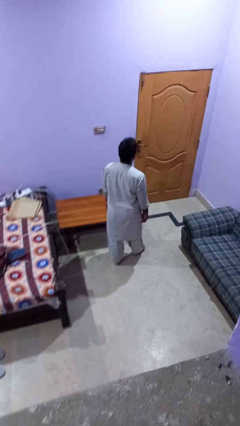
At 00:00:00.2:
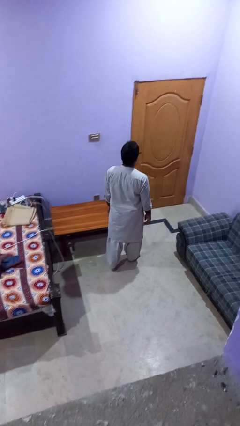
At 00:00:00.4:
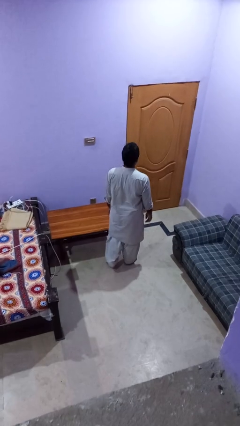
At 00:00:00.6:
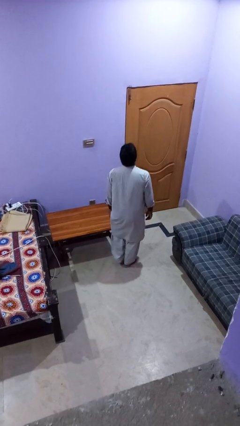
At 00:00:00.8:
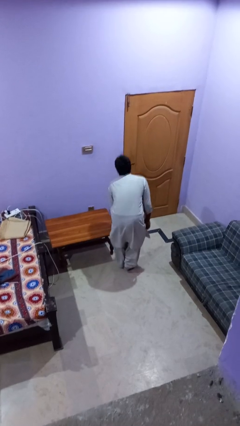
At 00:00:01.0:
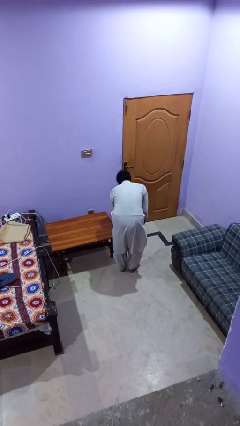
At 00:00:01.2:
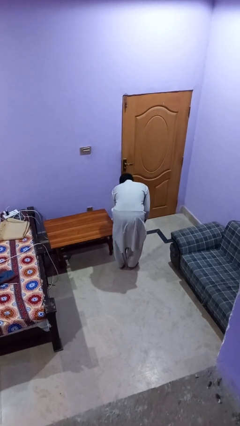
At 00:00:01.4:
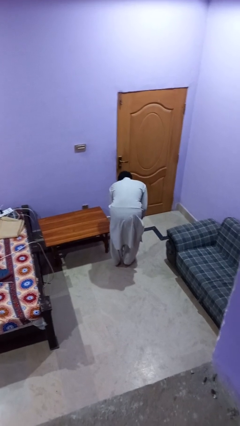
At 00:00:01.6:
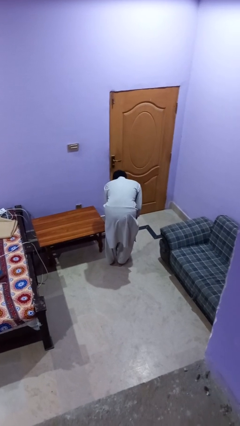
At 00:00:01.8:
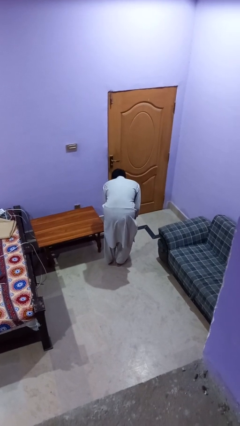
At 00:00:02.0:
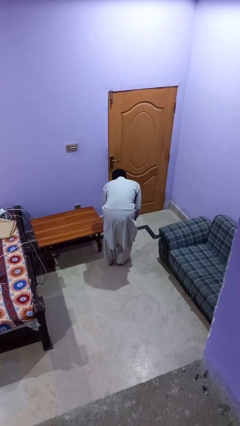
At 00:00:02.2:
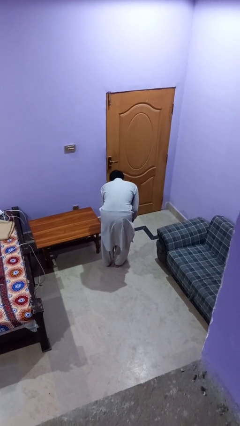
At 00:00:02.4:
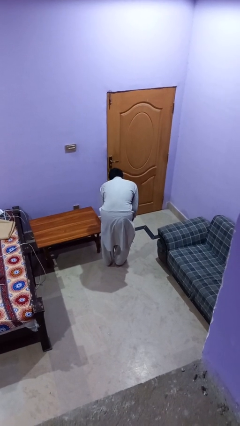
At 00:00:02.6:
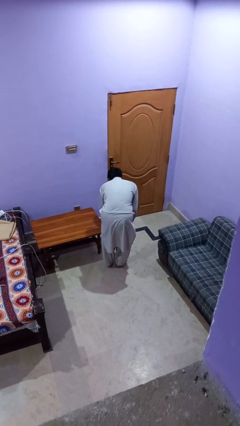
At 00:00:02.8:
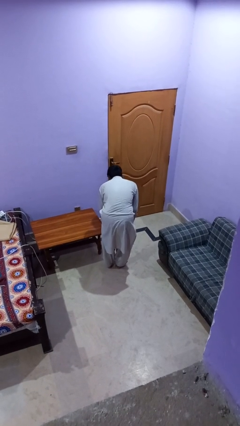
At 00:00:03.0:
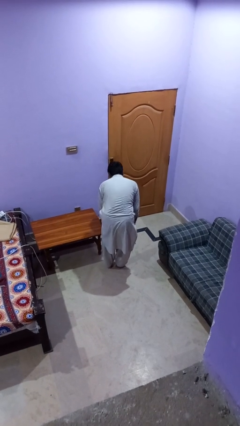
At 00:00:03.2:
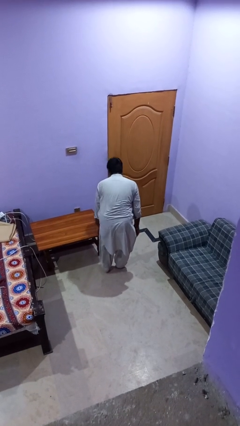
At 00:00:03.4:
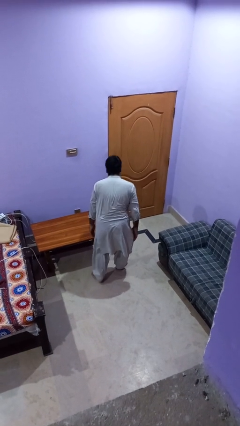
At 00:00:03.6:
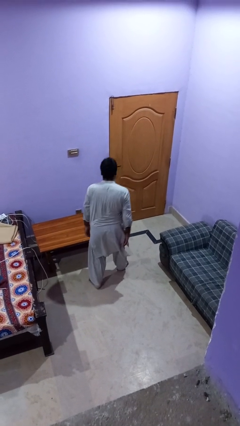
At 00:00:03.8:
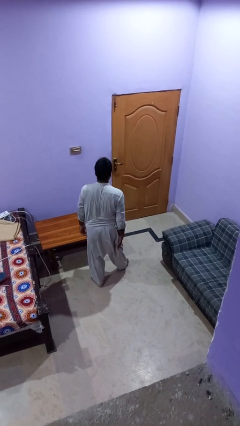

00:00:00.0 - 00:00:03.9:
person bumps into table

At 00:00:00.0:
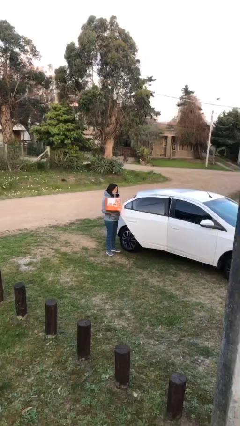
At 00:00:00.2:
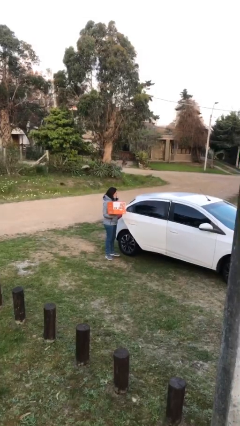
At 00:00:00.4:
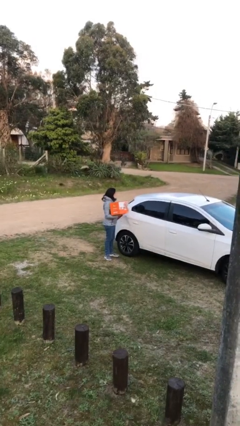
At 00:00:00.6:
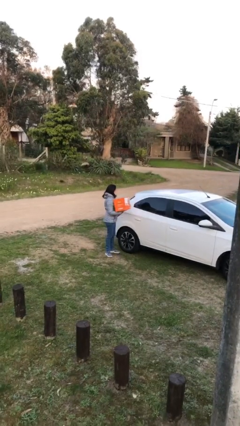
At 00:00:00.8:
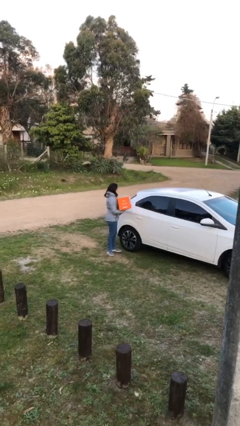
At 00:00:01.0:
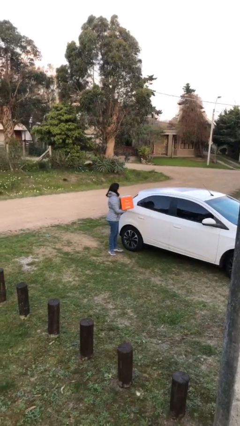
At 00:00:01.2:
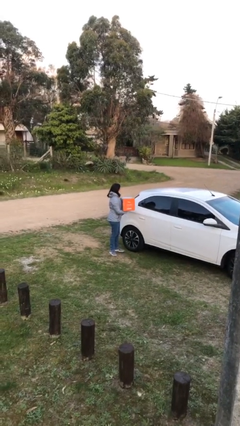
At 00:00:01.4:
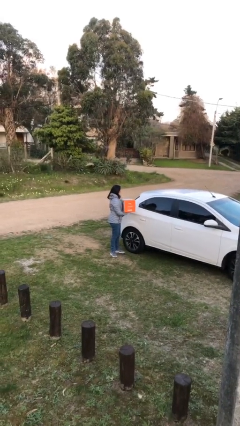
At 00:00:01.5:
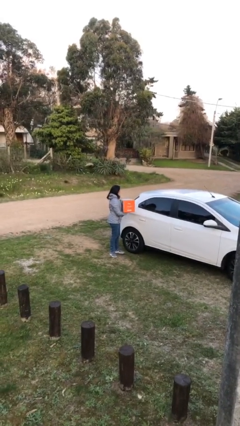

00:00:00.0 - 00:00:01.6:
person closes car door

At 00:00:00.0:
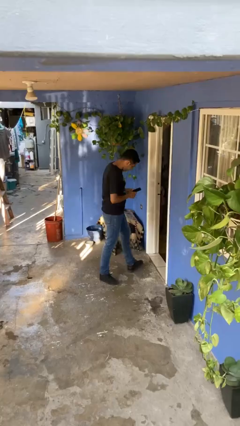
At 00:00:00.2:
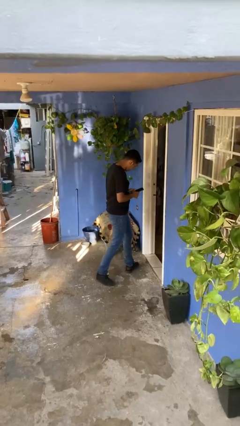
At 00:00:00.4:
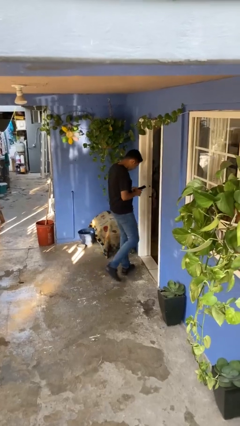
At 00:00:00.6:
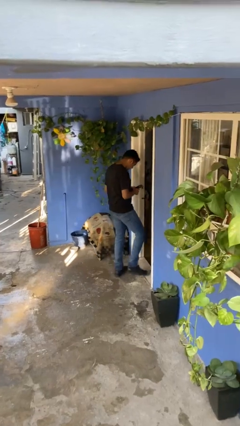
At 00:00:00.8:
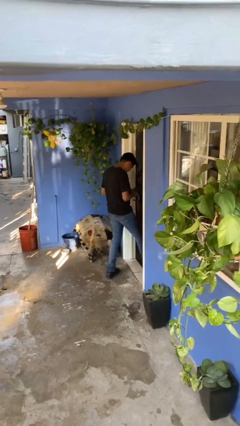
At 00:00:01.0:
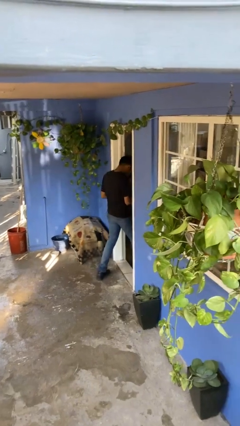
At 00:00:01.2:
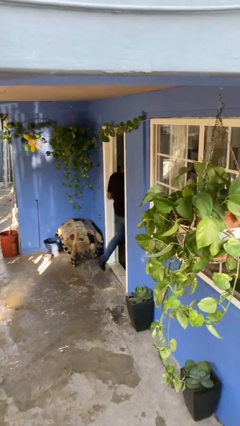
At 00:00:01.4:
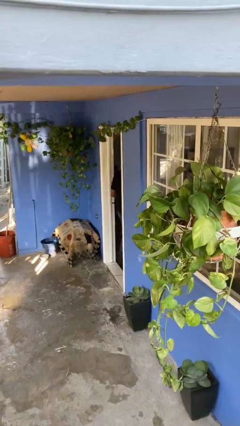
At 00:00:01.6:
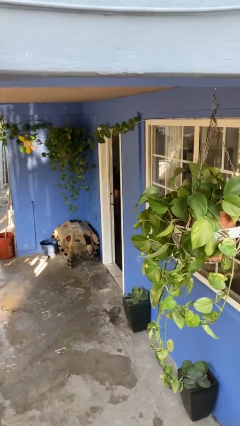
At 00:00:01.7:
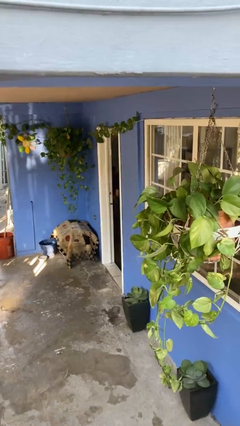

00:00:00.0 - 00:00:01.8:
person exits scene through structure

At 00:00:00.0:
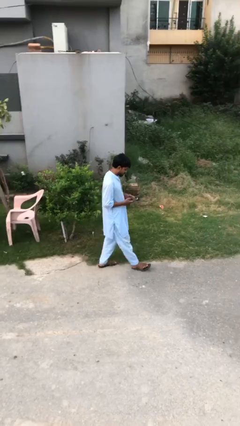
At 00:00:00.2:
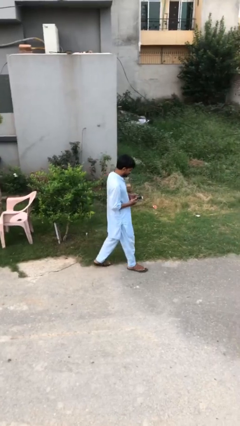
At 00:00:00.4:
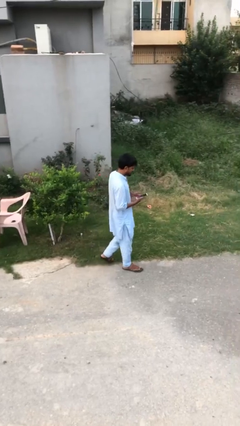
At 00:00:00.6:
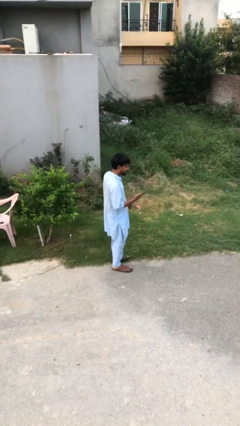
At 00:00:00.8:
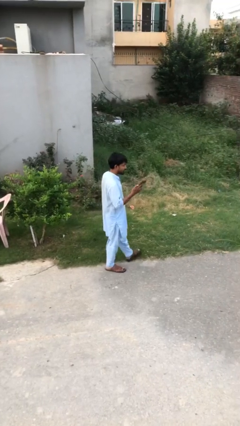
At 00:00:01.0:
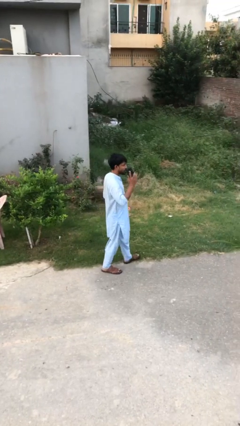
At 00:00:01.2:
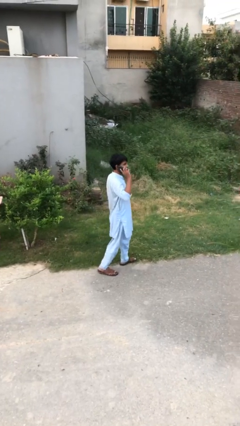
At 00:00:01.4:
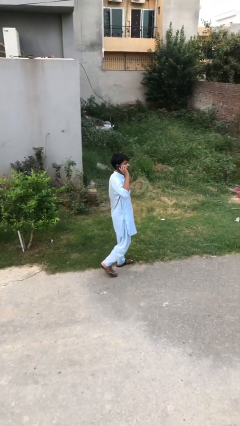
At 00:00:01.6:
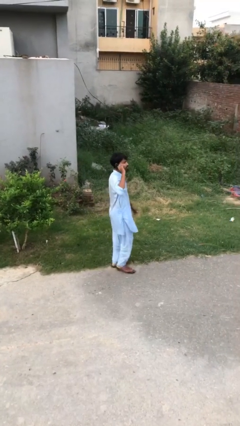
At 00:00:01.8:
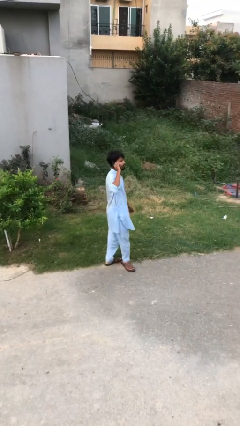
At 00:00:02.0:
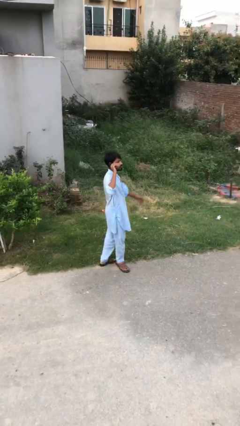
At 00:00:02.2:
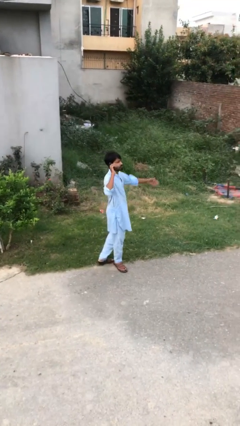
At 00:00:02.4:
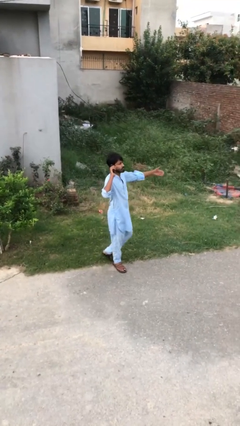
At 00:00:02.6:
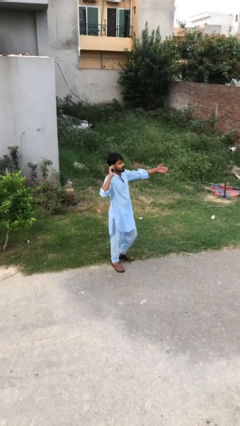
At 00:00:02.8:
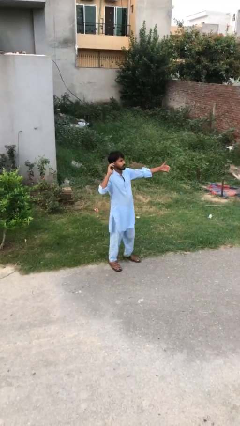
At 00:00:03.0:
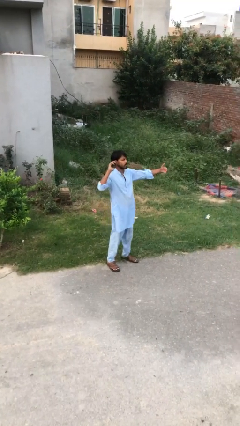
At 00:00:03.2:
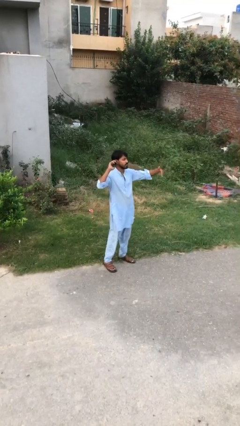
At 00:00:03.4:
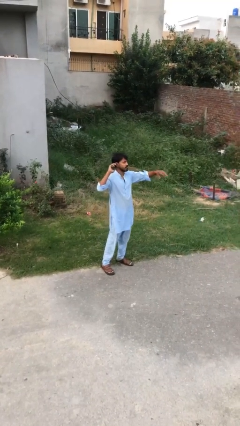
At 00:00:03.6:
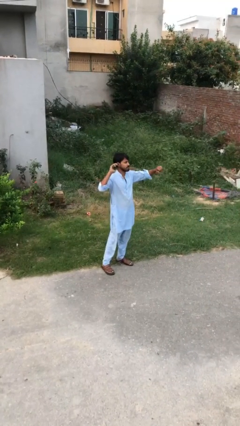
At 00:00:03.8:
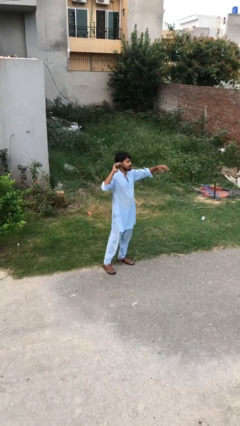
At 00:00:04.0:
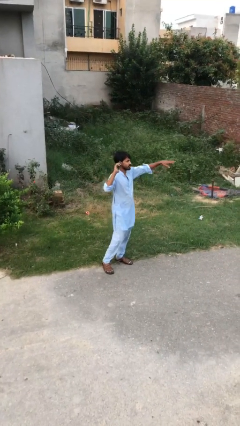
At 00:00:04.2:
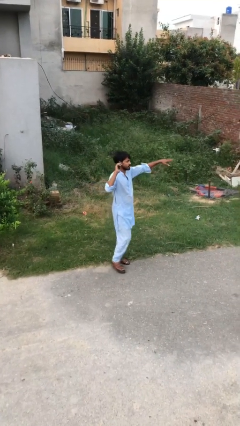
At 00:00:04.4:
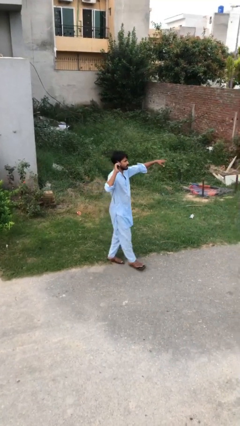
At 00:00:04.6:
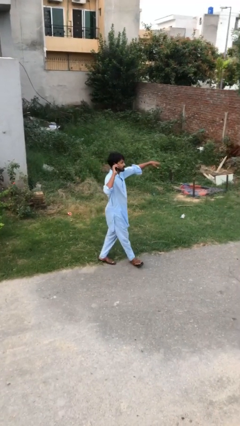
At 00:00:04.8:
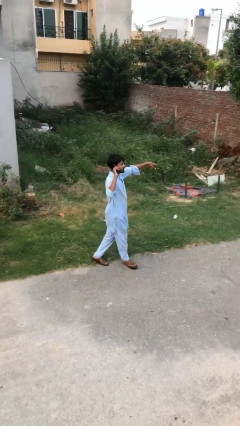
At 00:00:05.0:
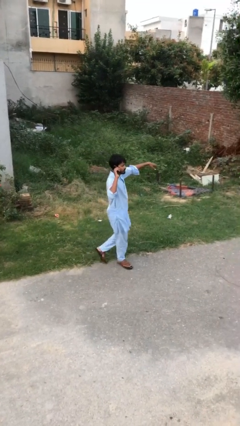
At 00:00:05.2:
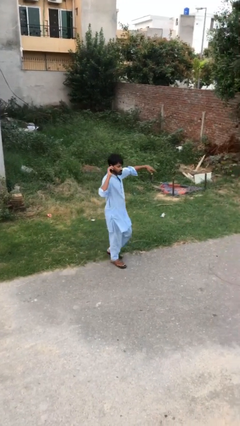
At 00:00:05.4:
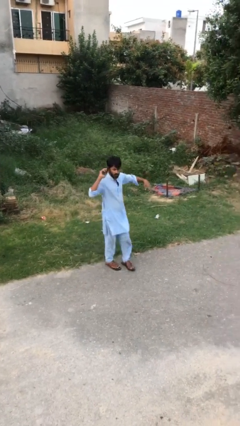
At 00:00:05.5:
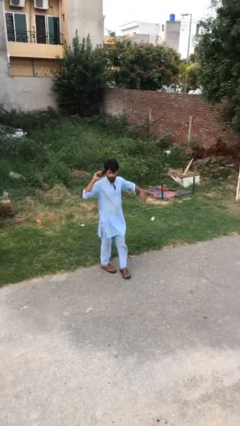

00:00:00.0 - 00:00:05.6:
person talks on phone

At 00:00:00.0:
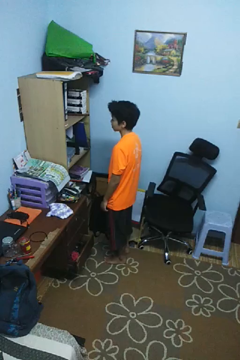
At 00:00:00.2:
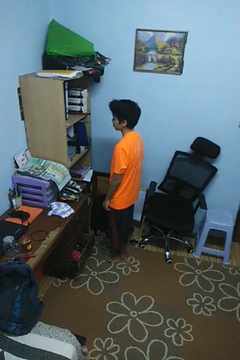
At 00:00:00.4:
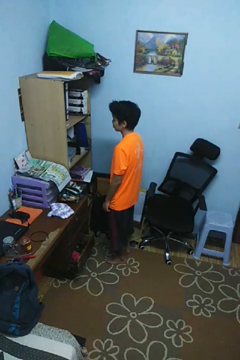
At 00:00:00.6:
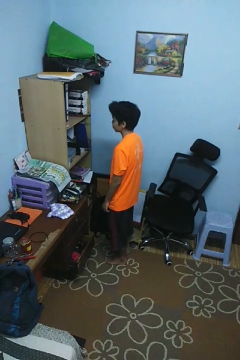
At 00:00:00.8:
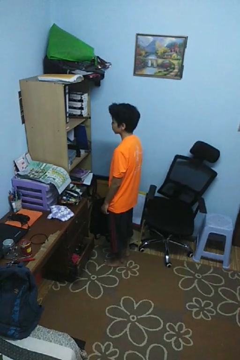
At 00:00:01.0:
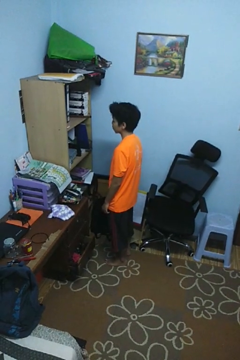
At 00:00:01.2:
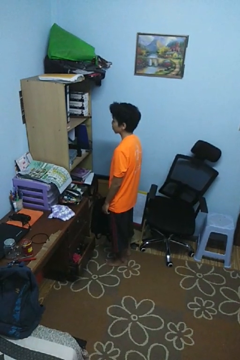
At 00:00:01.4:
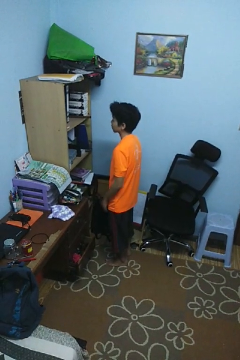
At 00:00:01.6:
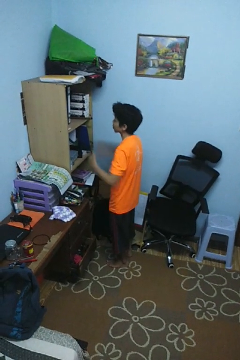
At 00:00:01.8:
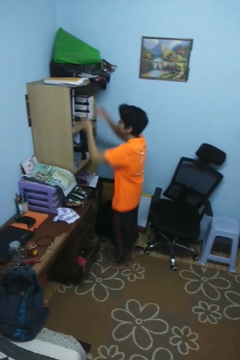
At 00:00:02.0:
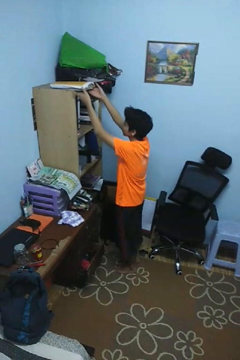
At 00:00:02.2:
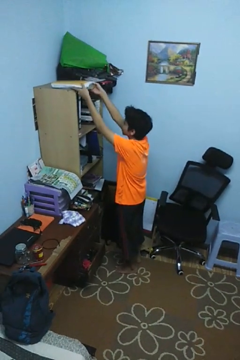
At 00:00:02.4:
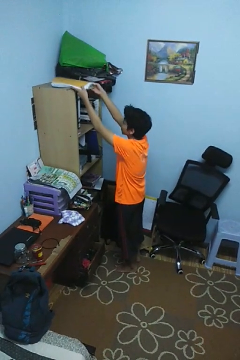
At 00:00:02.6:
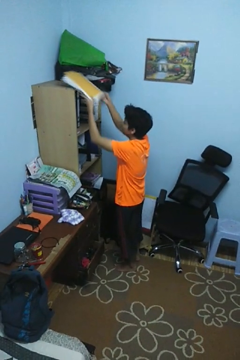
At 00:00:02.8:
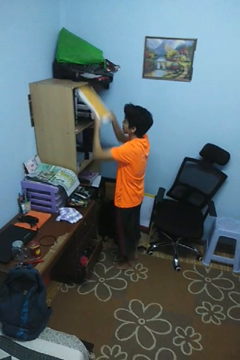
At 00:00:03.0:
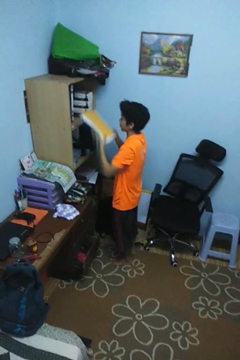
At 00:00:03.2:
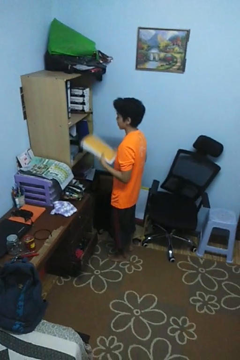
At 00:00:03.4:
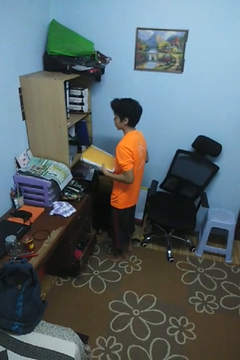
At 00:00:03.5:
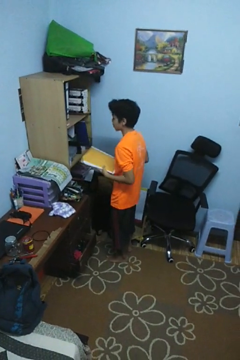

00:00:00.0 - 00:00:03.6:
person picks up object from shelf

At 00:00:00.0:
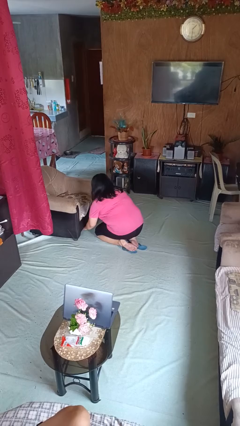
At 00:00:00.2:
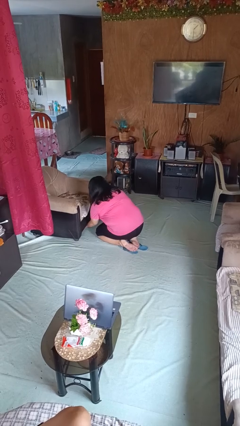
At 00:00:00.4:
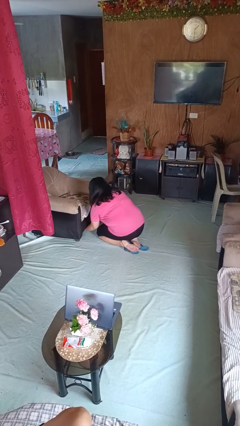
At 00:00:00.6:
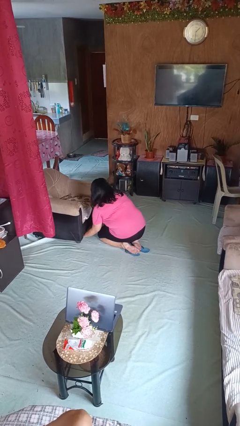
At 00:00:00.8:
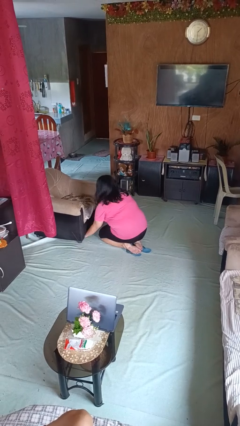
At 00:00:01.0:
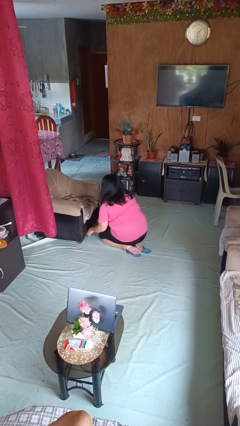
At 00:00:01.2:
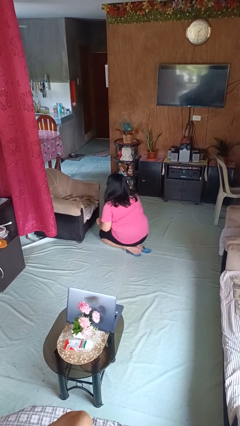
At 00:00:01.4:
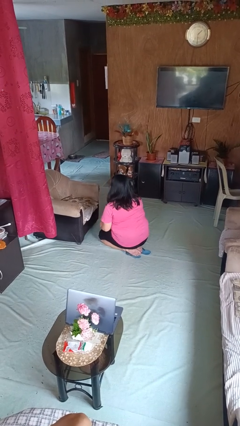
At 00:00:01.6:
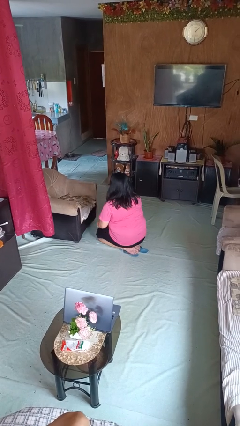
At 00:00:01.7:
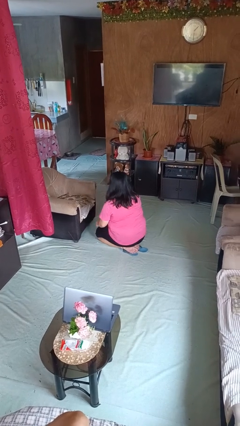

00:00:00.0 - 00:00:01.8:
person searches under couch
